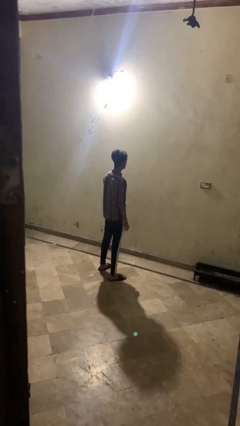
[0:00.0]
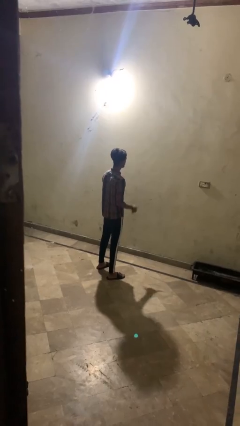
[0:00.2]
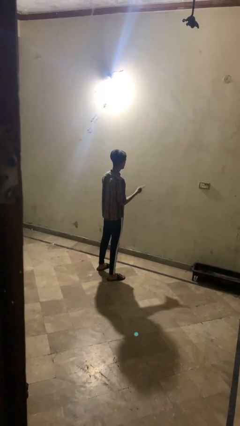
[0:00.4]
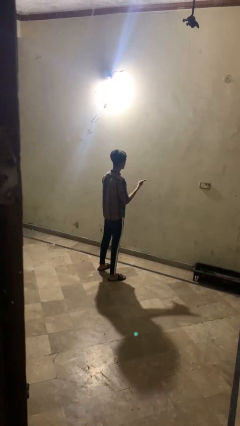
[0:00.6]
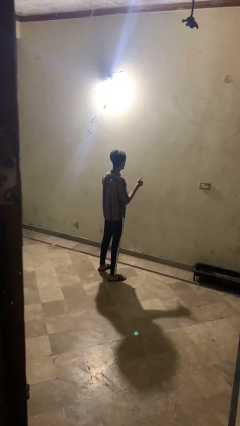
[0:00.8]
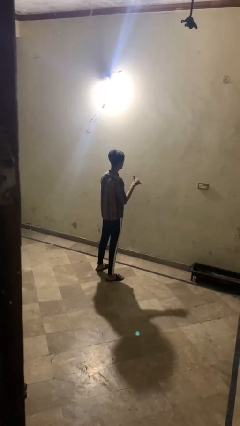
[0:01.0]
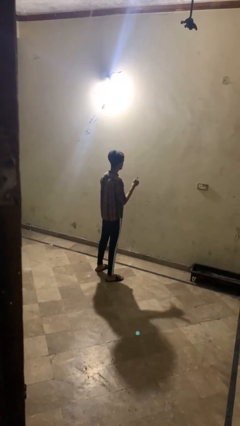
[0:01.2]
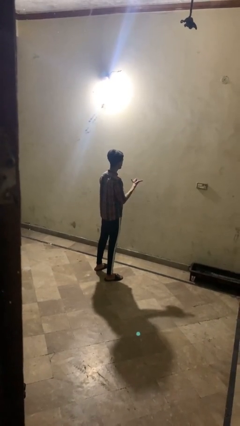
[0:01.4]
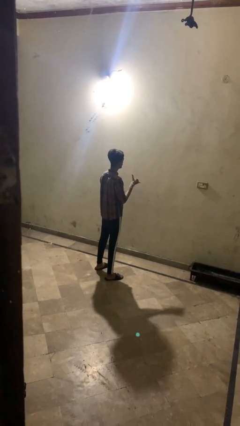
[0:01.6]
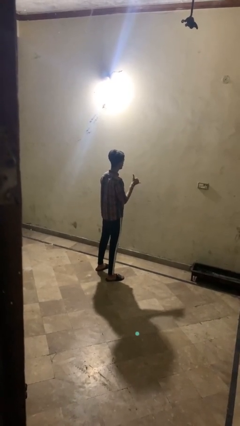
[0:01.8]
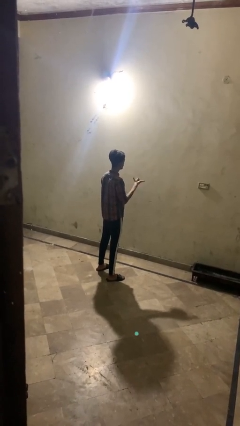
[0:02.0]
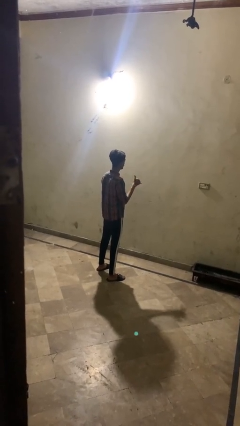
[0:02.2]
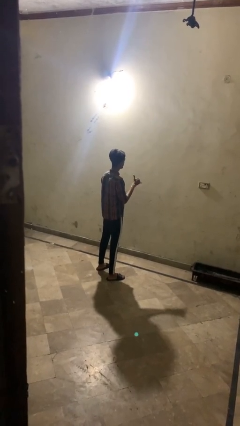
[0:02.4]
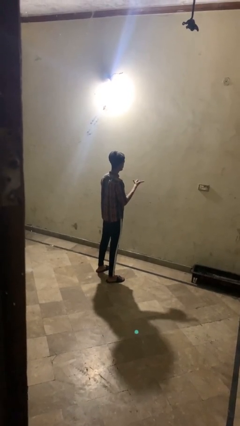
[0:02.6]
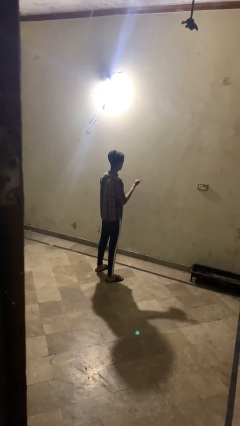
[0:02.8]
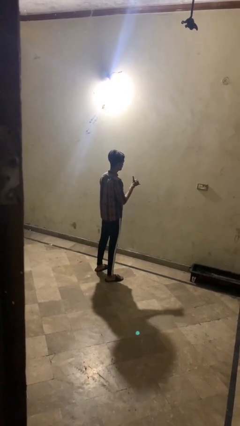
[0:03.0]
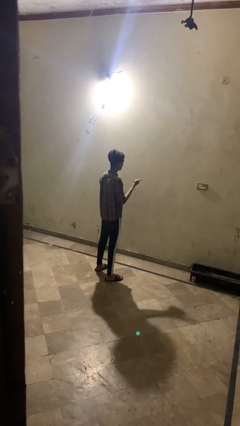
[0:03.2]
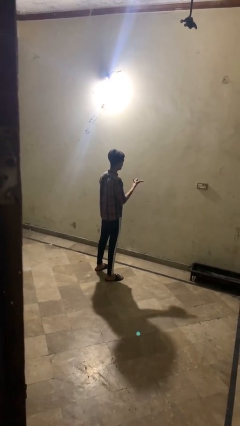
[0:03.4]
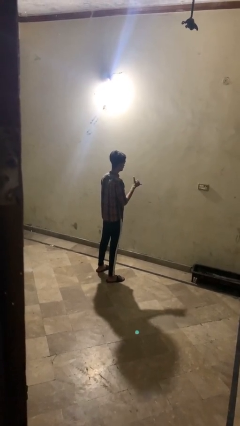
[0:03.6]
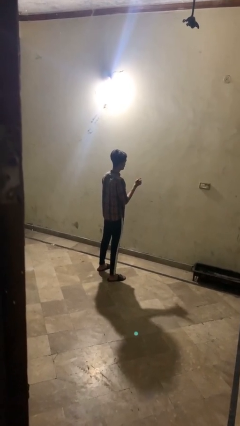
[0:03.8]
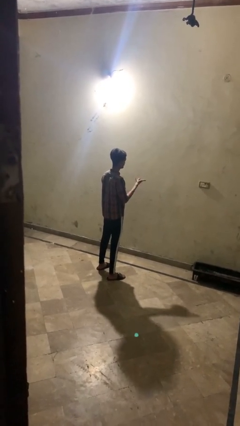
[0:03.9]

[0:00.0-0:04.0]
person gestures hang loose

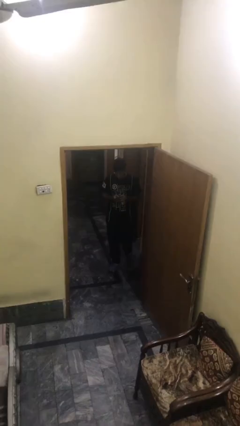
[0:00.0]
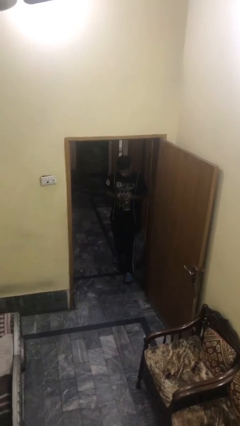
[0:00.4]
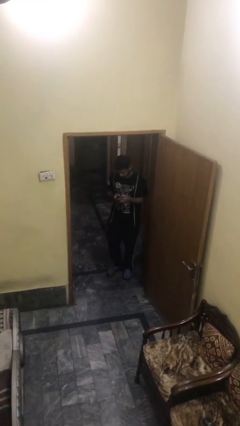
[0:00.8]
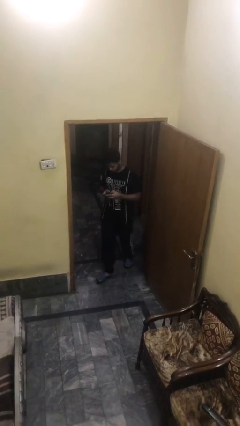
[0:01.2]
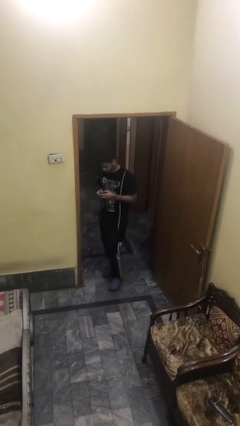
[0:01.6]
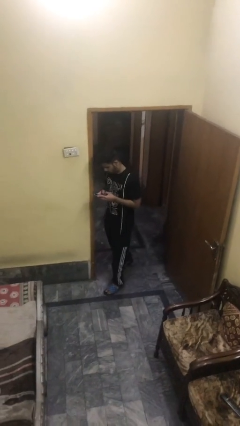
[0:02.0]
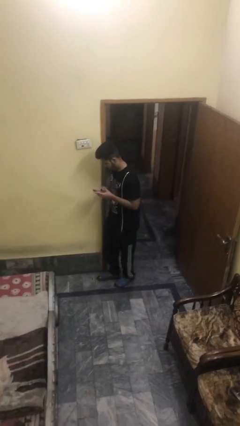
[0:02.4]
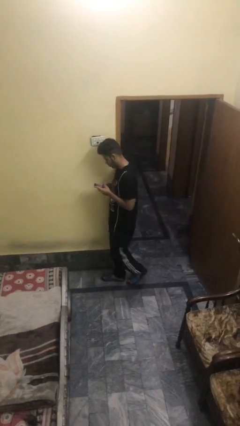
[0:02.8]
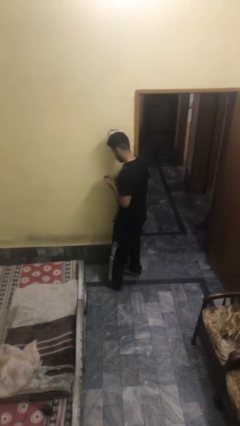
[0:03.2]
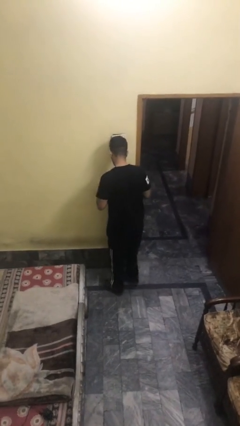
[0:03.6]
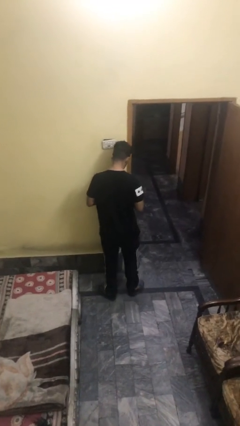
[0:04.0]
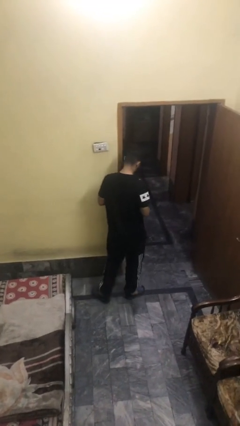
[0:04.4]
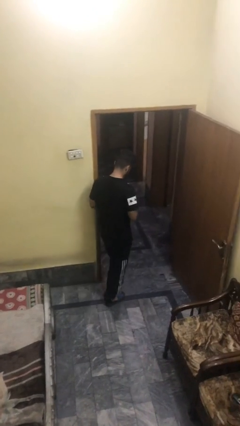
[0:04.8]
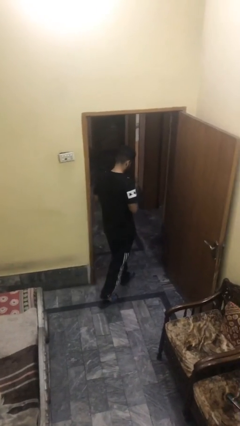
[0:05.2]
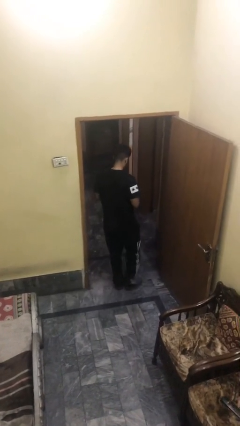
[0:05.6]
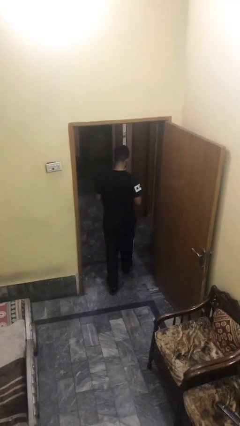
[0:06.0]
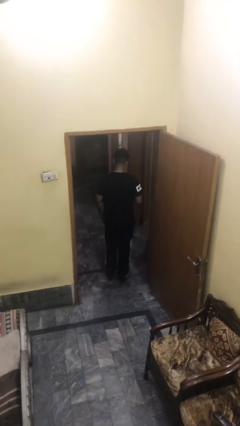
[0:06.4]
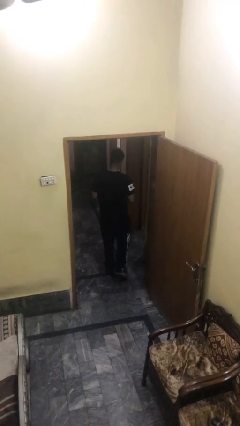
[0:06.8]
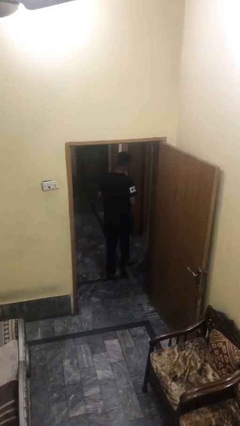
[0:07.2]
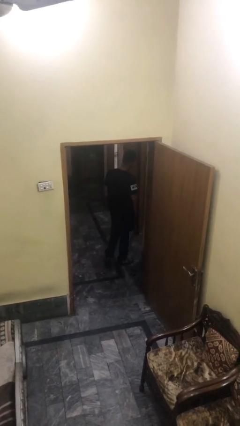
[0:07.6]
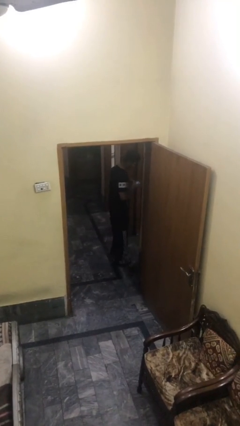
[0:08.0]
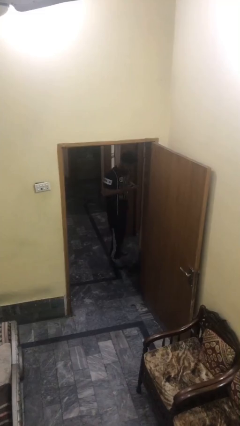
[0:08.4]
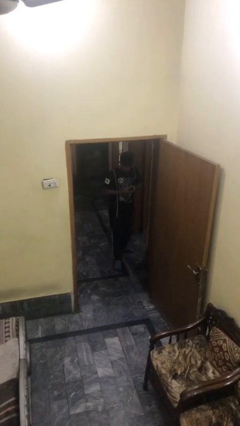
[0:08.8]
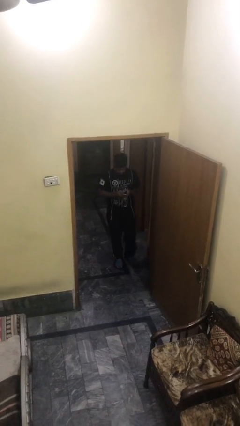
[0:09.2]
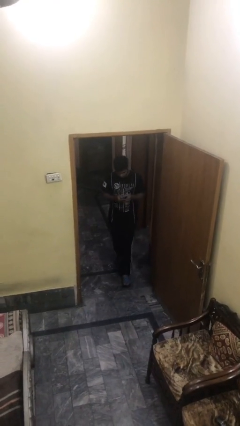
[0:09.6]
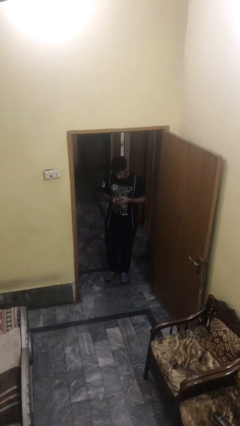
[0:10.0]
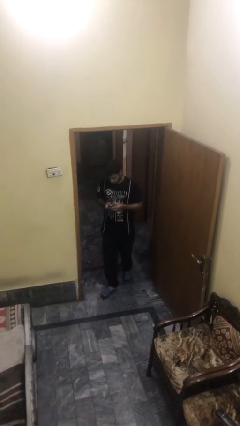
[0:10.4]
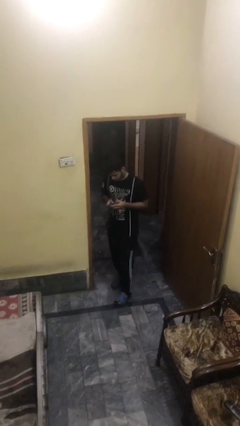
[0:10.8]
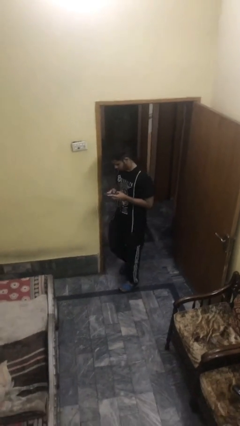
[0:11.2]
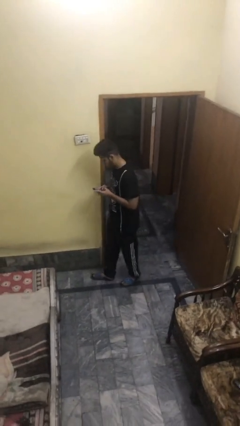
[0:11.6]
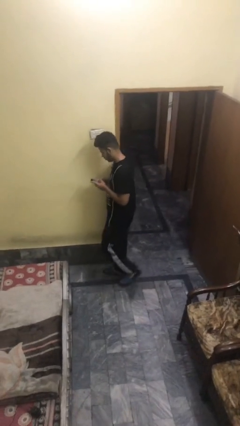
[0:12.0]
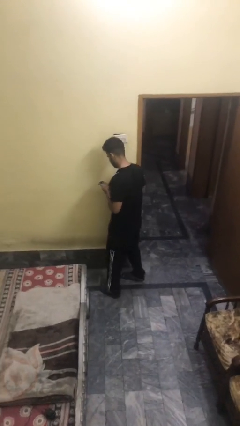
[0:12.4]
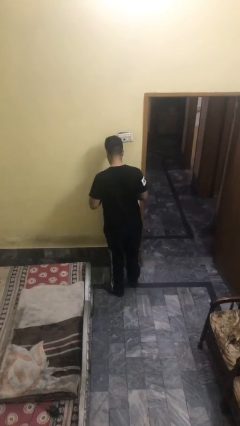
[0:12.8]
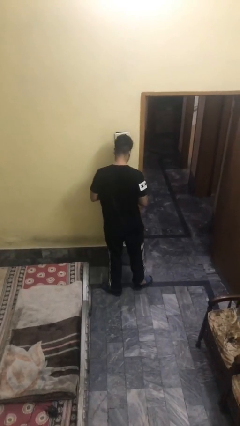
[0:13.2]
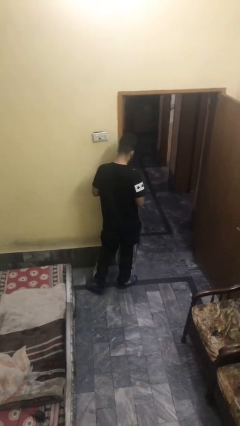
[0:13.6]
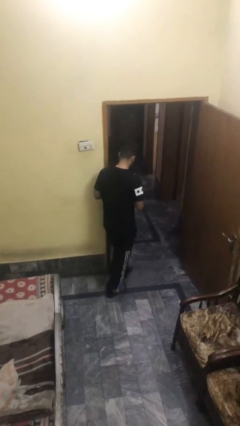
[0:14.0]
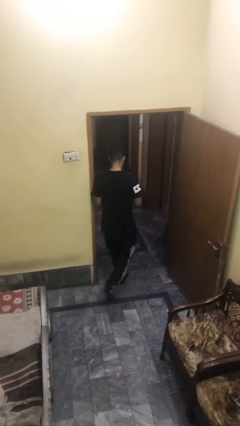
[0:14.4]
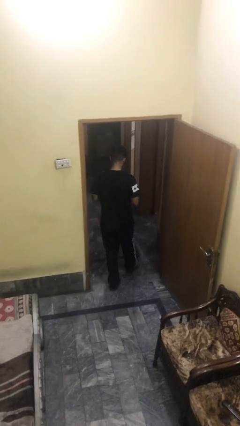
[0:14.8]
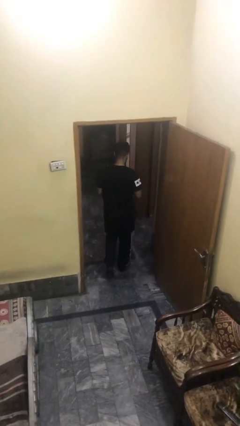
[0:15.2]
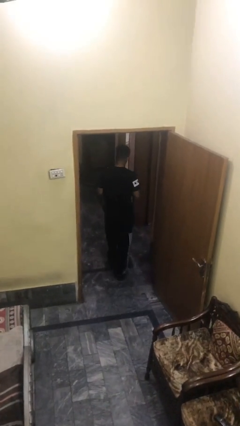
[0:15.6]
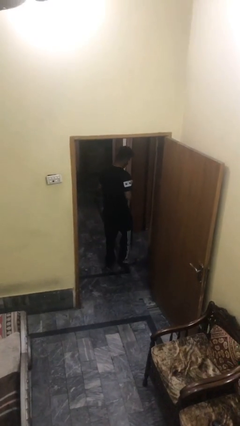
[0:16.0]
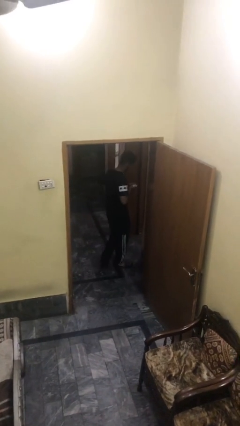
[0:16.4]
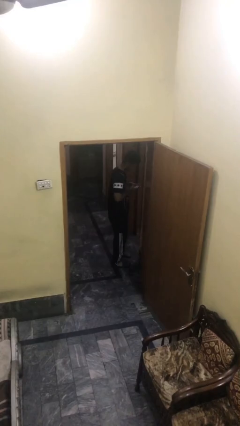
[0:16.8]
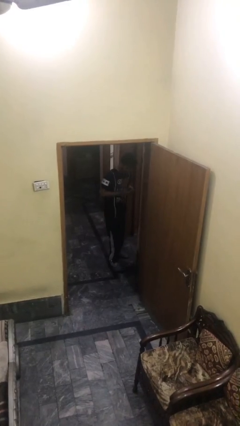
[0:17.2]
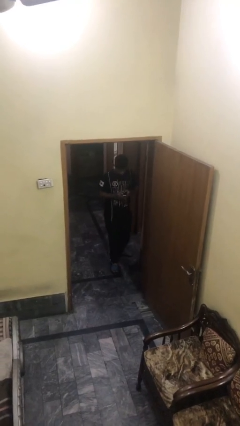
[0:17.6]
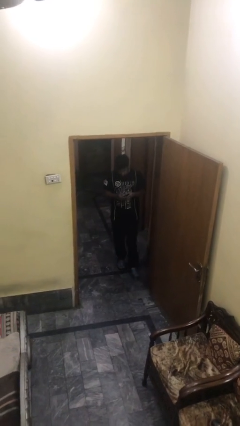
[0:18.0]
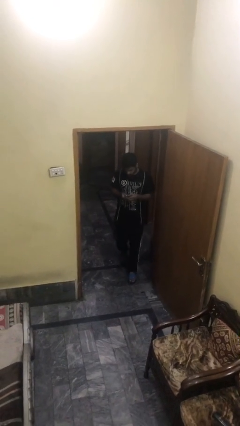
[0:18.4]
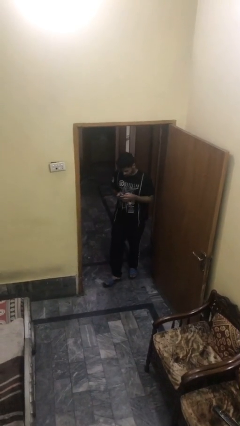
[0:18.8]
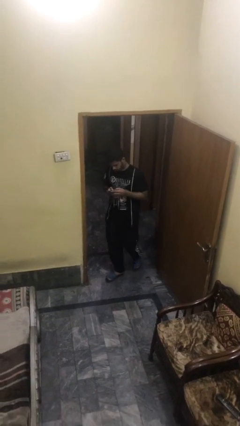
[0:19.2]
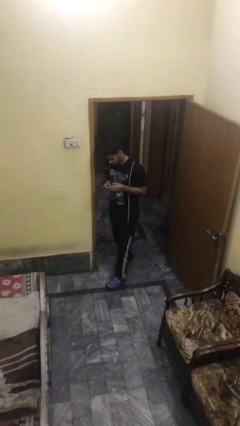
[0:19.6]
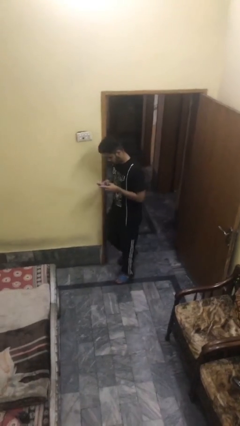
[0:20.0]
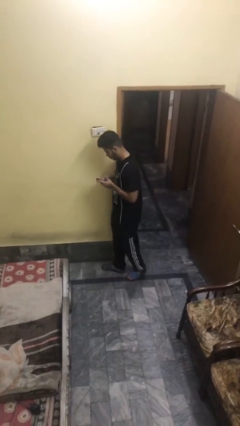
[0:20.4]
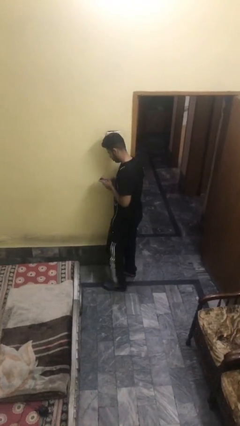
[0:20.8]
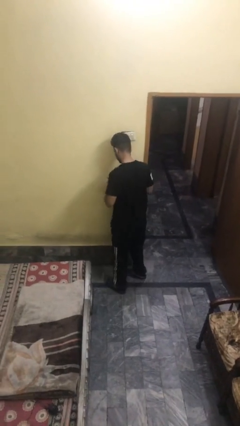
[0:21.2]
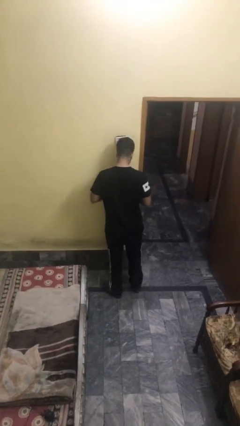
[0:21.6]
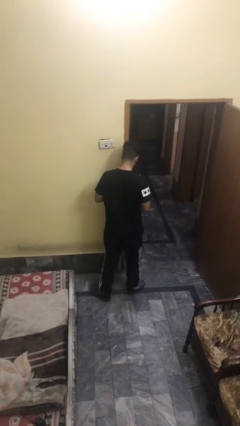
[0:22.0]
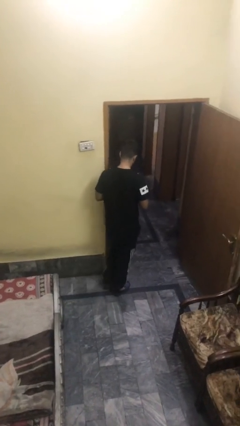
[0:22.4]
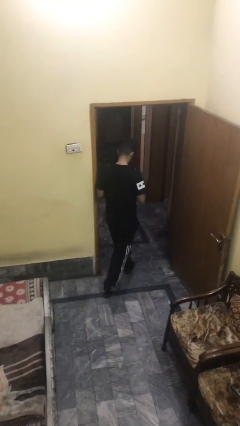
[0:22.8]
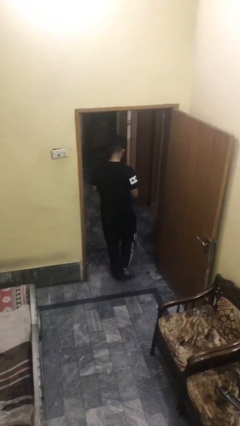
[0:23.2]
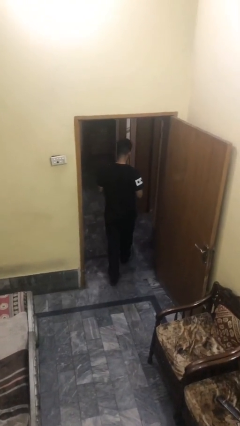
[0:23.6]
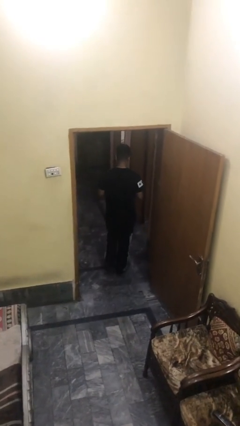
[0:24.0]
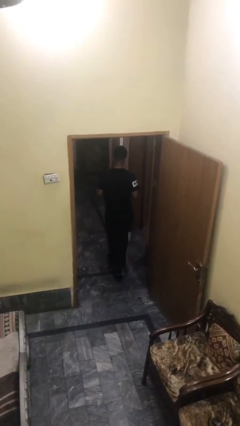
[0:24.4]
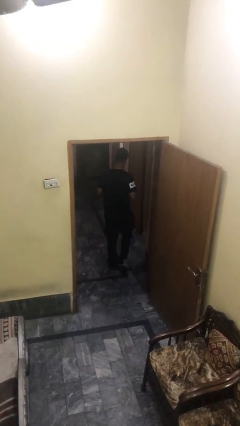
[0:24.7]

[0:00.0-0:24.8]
person texts on phone

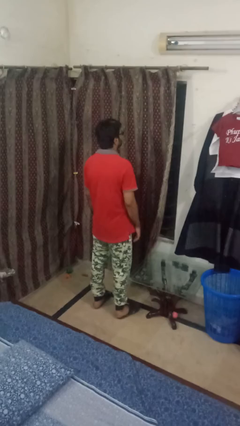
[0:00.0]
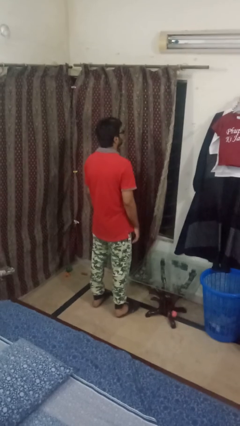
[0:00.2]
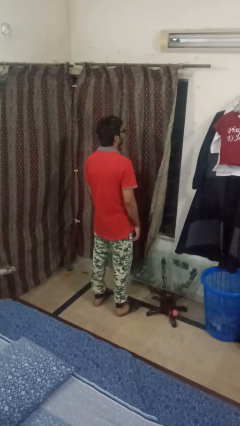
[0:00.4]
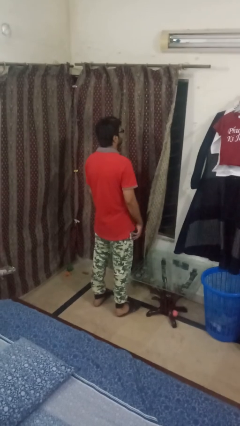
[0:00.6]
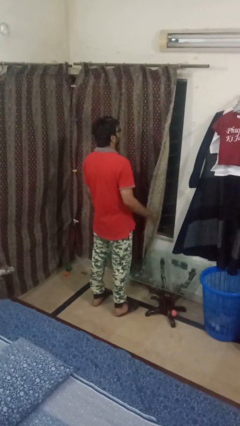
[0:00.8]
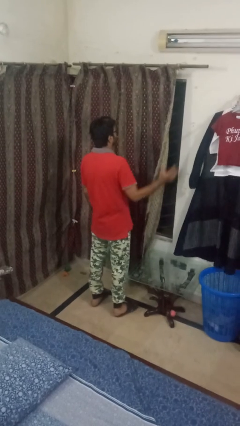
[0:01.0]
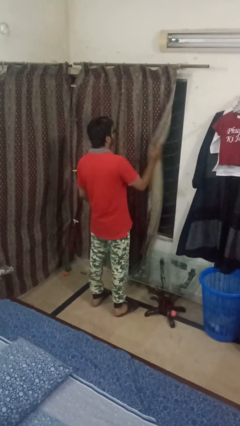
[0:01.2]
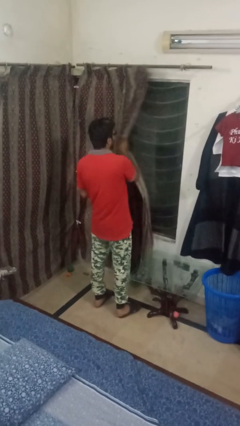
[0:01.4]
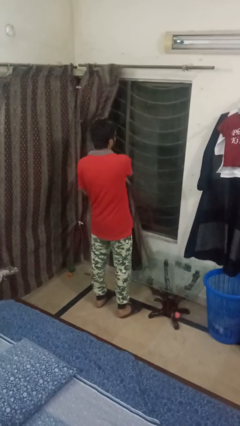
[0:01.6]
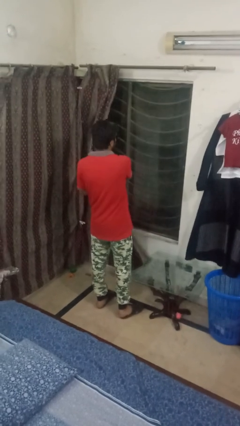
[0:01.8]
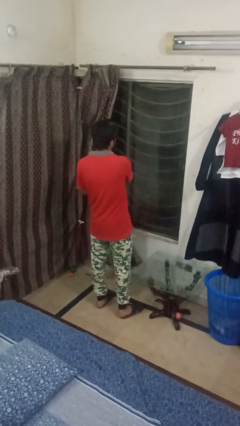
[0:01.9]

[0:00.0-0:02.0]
person opens curtains
